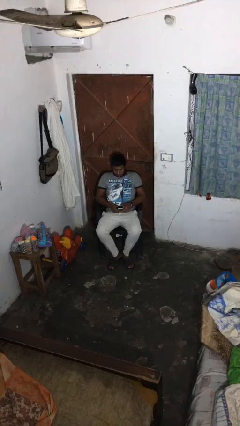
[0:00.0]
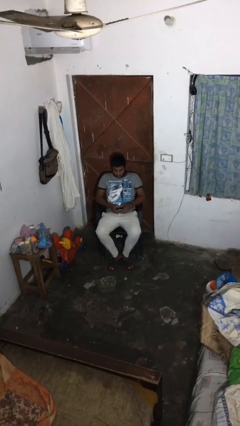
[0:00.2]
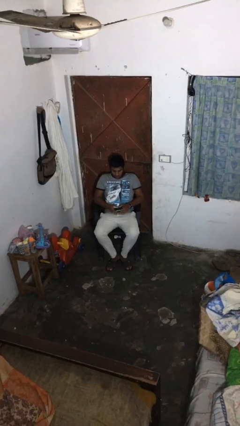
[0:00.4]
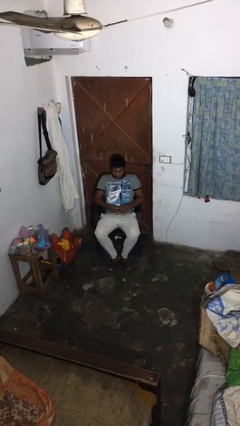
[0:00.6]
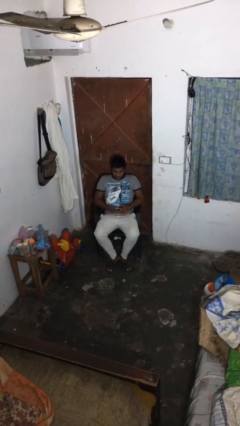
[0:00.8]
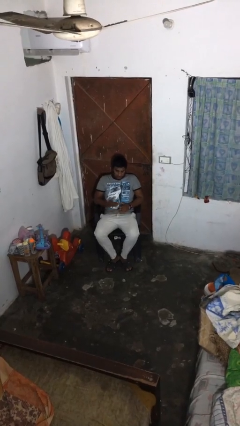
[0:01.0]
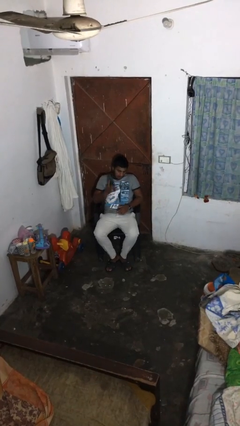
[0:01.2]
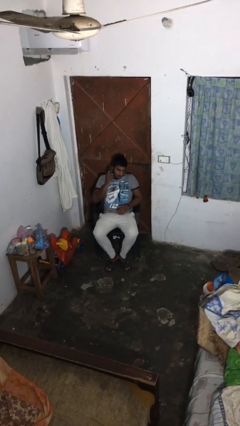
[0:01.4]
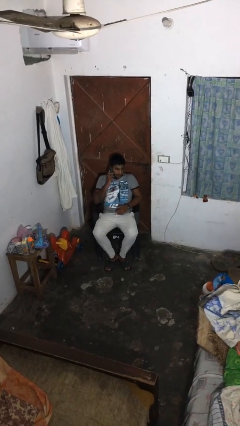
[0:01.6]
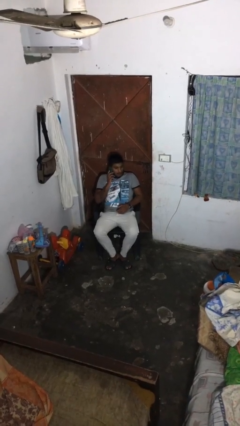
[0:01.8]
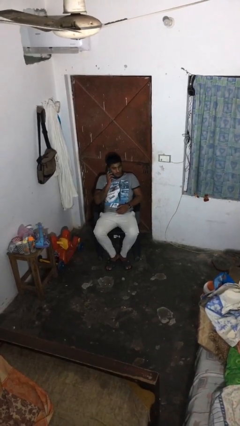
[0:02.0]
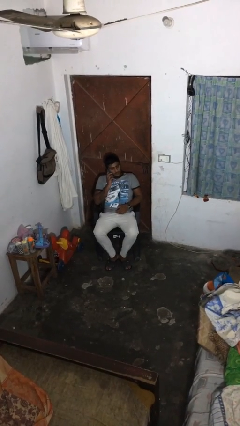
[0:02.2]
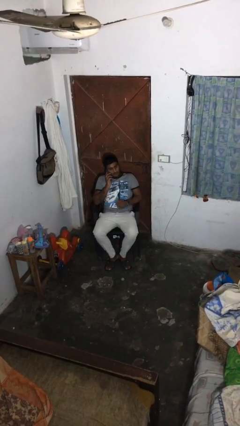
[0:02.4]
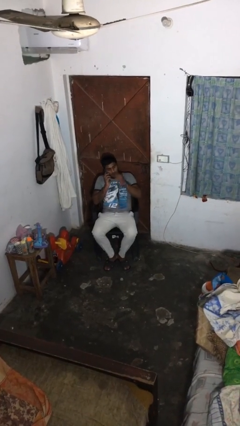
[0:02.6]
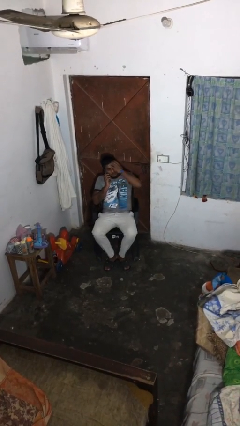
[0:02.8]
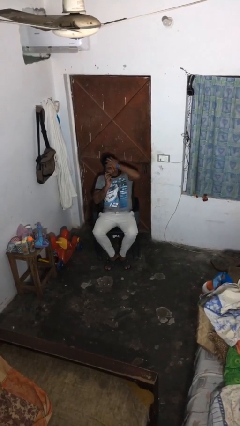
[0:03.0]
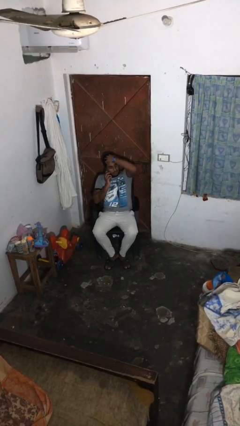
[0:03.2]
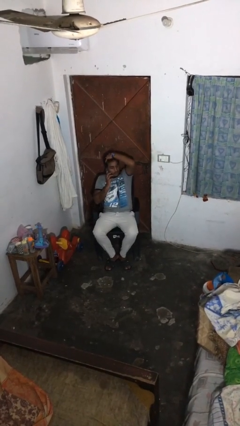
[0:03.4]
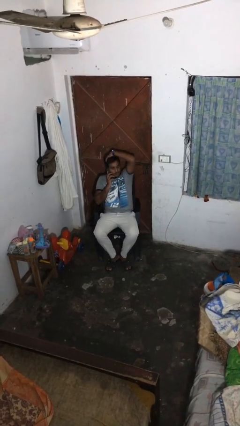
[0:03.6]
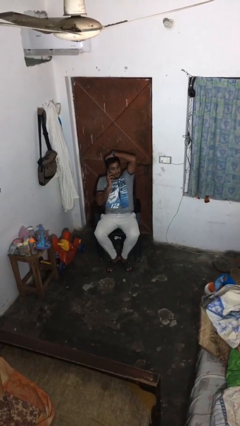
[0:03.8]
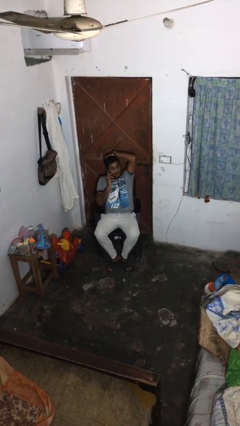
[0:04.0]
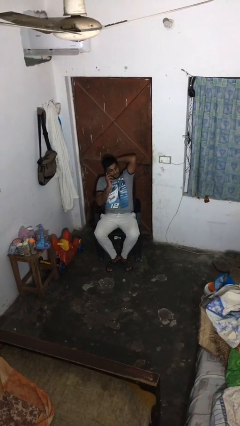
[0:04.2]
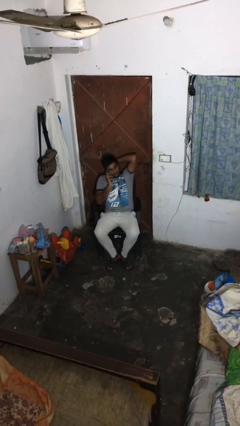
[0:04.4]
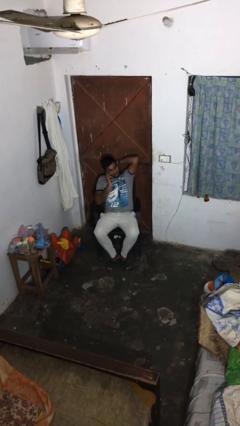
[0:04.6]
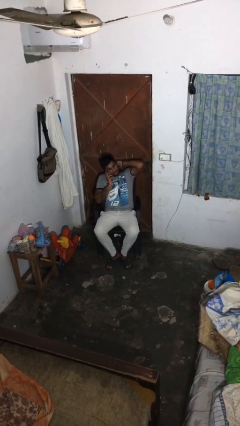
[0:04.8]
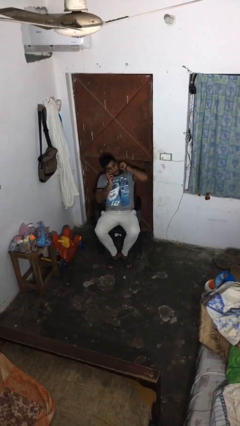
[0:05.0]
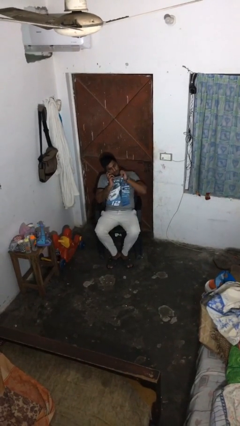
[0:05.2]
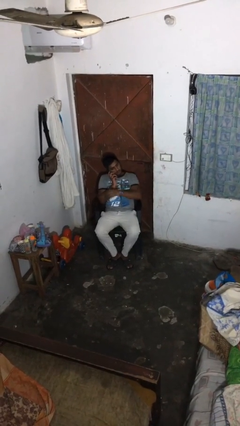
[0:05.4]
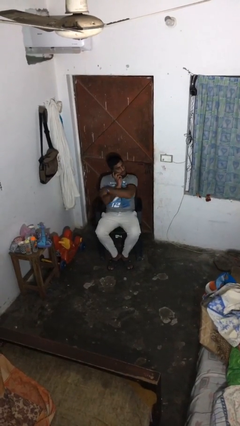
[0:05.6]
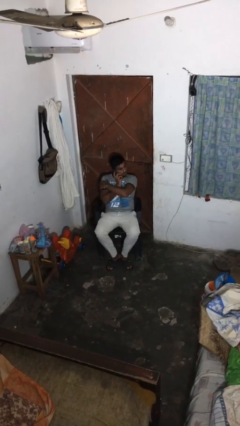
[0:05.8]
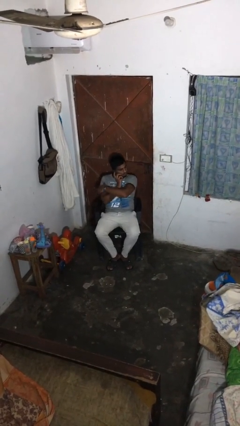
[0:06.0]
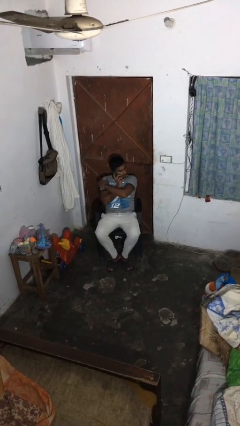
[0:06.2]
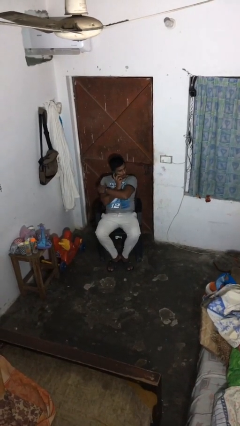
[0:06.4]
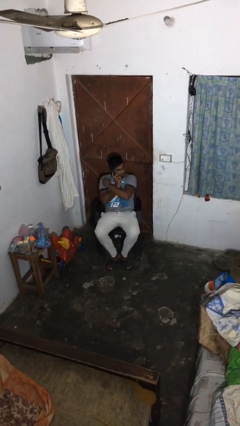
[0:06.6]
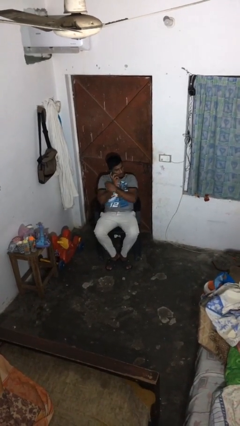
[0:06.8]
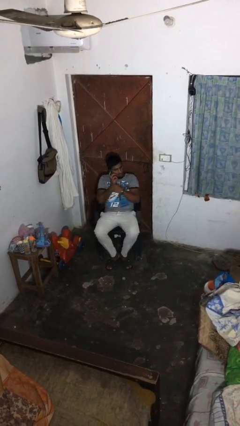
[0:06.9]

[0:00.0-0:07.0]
person talks on phone

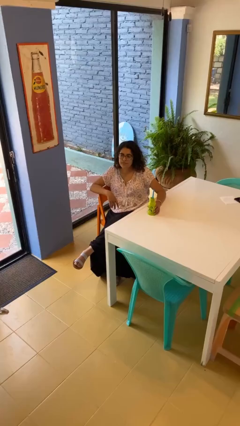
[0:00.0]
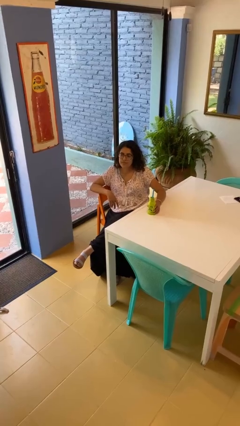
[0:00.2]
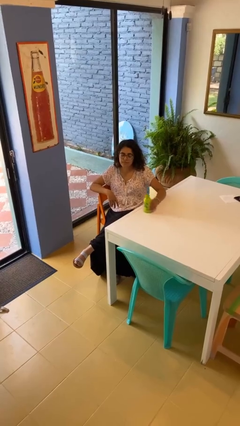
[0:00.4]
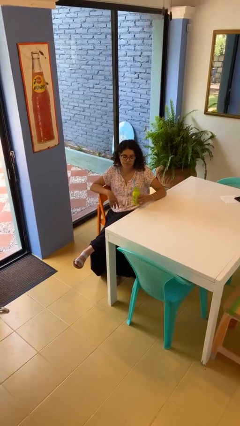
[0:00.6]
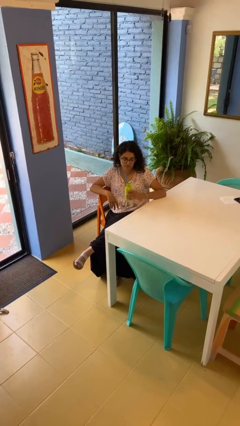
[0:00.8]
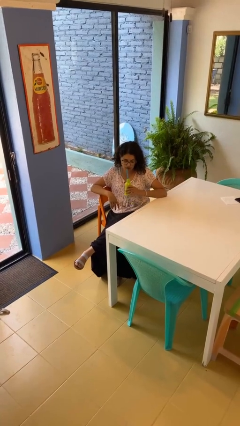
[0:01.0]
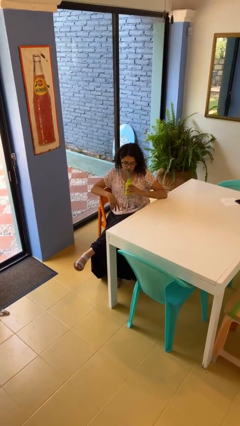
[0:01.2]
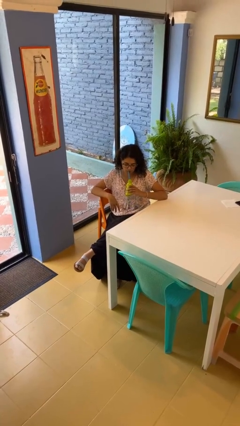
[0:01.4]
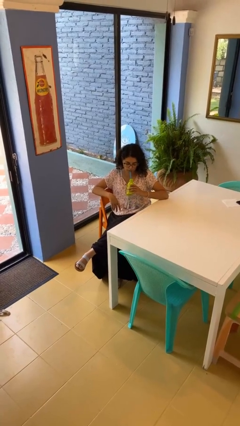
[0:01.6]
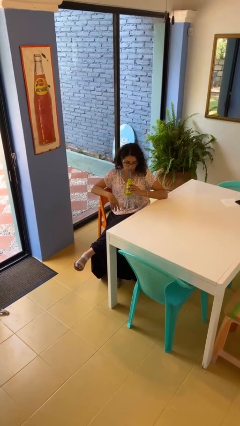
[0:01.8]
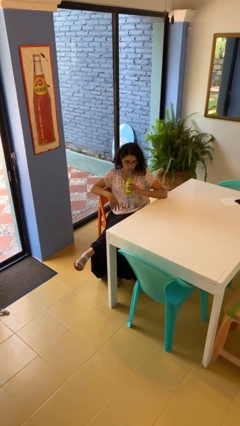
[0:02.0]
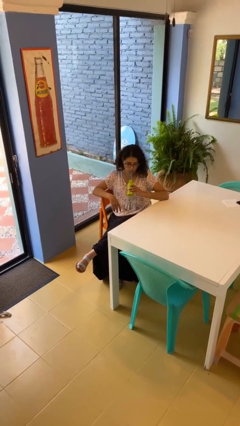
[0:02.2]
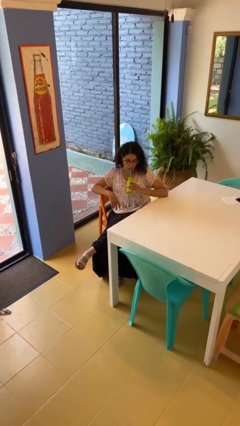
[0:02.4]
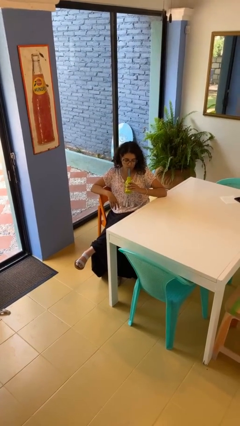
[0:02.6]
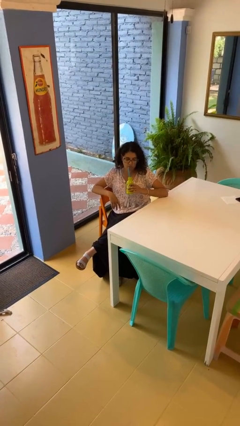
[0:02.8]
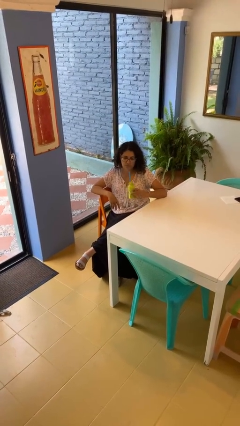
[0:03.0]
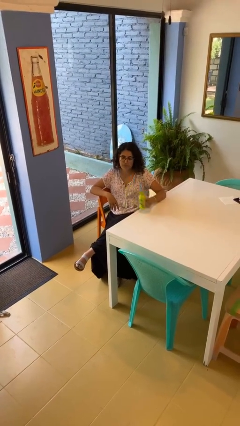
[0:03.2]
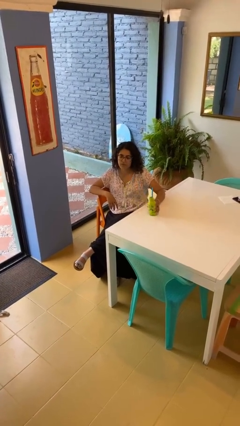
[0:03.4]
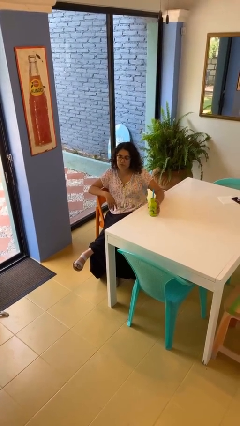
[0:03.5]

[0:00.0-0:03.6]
person drinks from straw

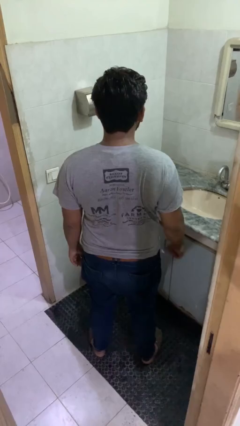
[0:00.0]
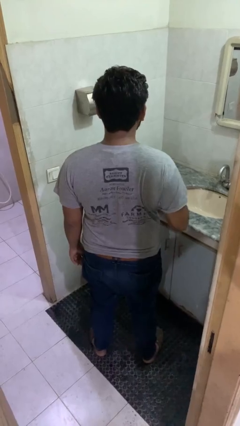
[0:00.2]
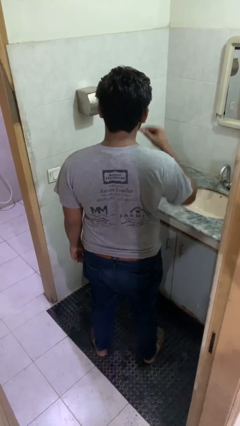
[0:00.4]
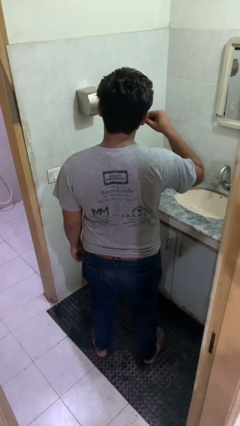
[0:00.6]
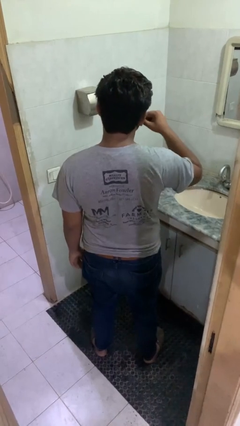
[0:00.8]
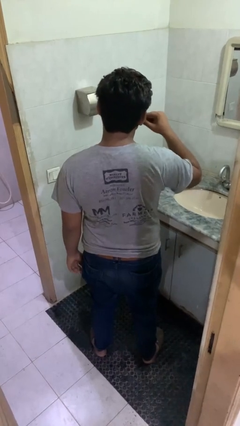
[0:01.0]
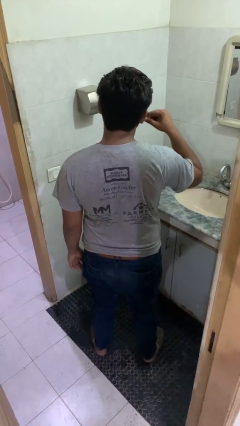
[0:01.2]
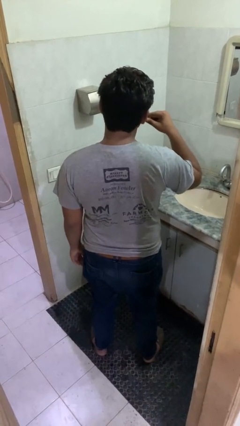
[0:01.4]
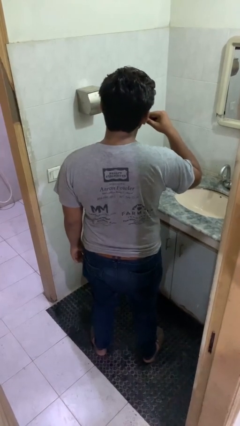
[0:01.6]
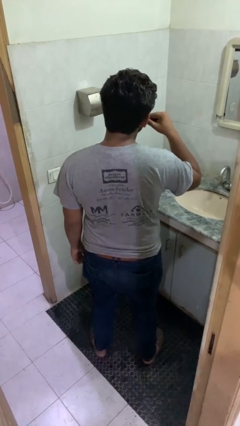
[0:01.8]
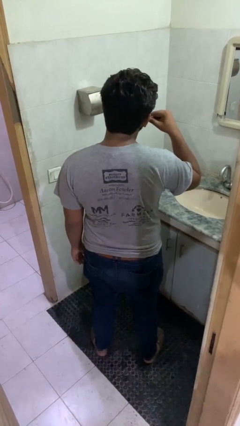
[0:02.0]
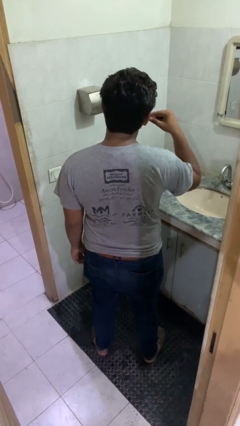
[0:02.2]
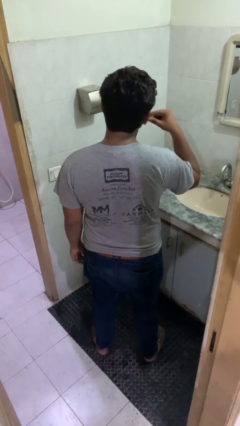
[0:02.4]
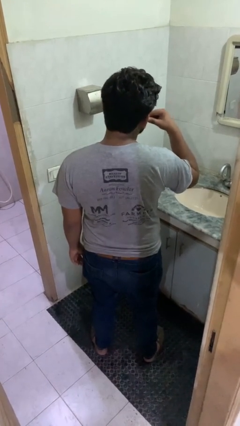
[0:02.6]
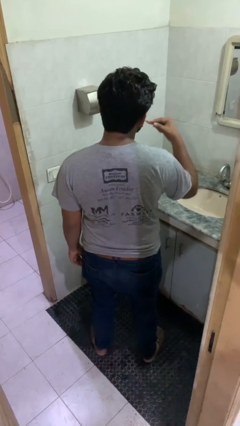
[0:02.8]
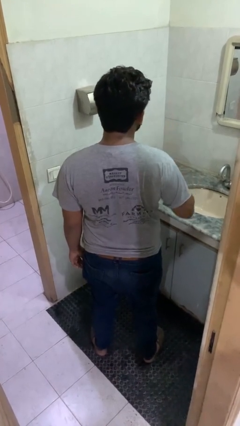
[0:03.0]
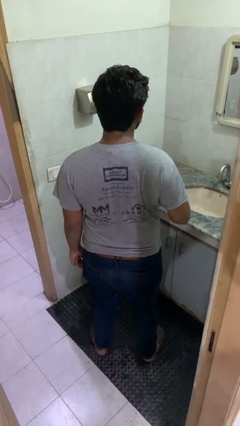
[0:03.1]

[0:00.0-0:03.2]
person brushes teeth

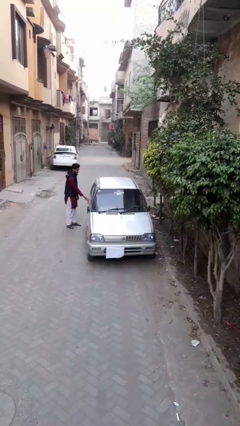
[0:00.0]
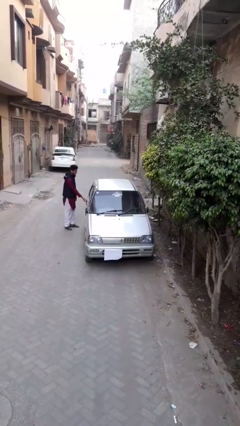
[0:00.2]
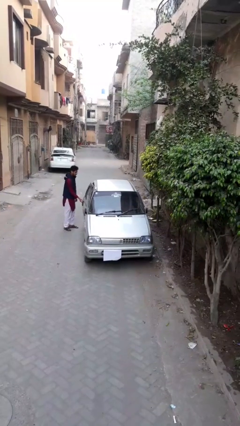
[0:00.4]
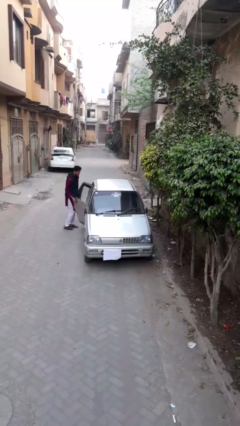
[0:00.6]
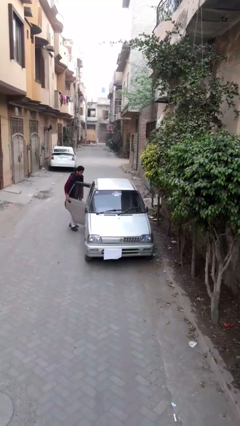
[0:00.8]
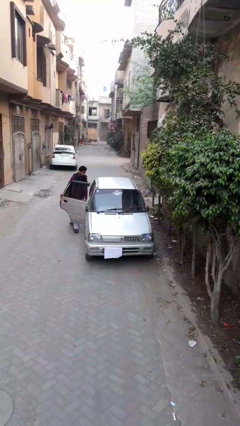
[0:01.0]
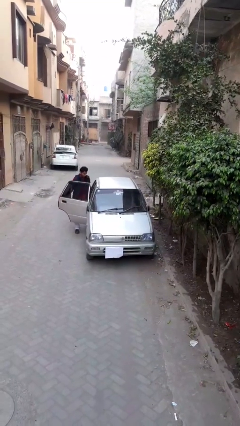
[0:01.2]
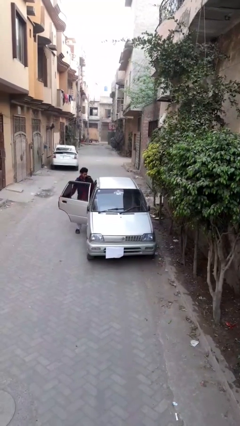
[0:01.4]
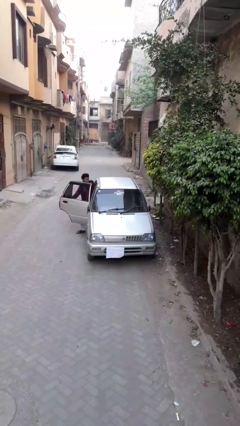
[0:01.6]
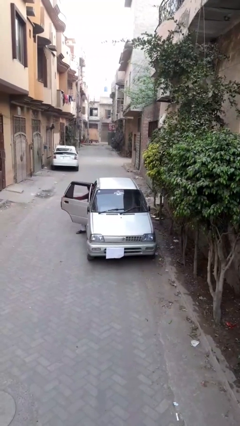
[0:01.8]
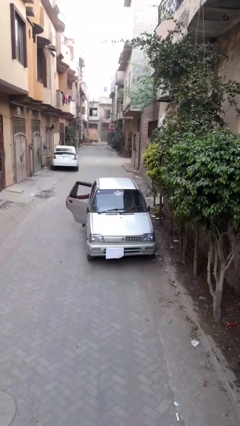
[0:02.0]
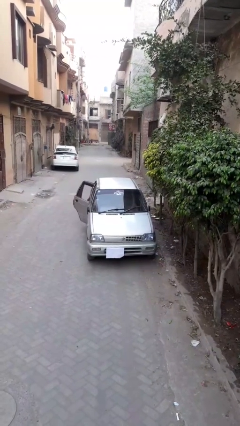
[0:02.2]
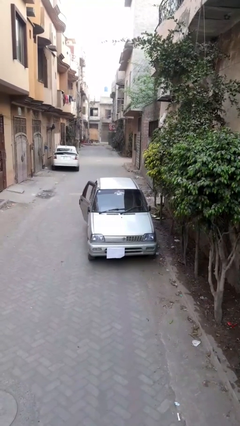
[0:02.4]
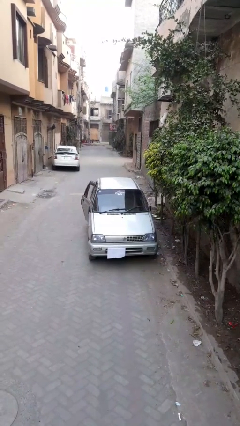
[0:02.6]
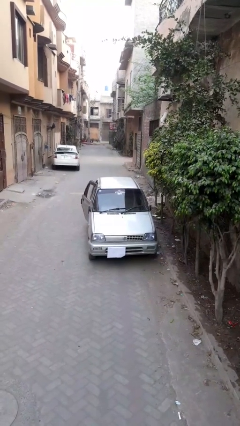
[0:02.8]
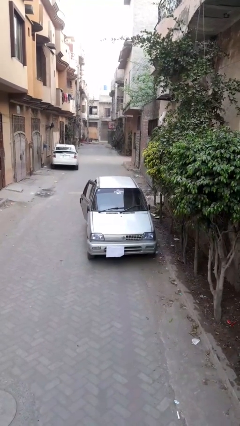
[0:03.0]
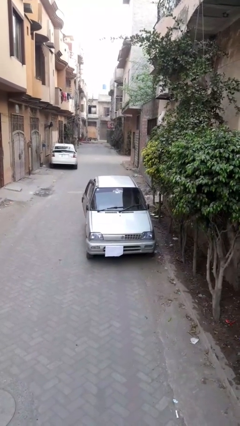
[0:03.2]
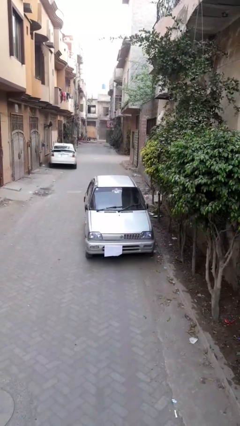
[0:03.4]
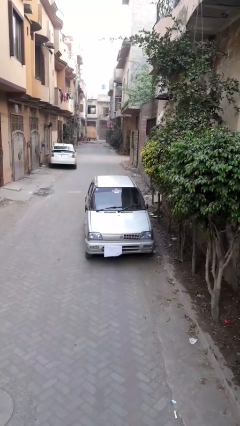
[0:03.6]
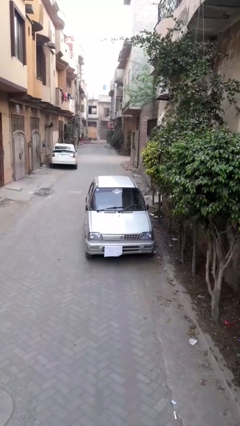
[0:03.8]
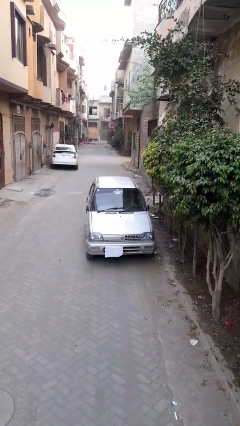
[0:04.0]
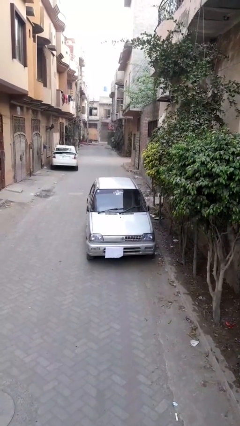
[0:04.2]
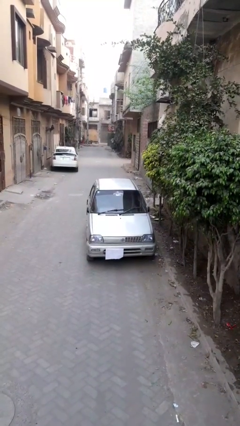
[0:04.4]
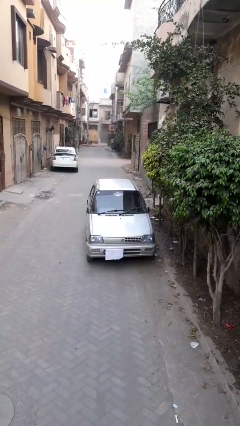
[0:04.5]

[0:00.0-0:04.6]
car picks up person
